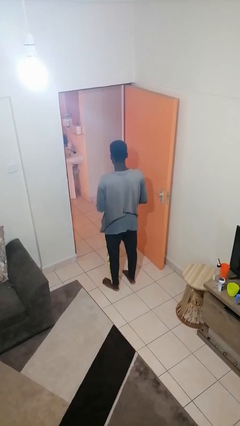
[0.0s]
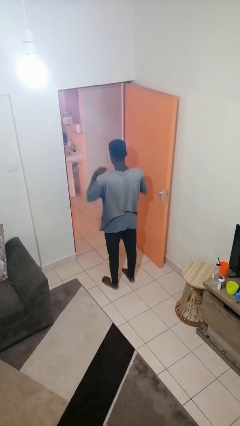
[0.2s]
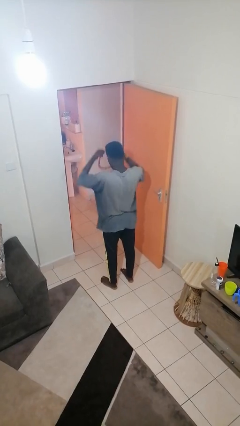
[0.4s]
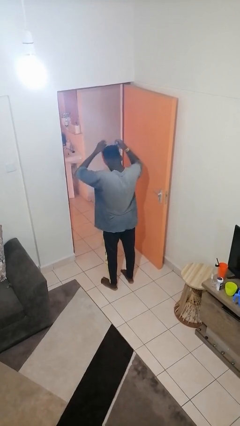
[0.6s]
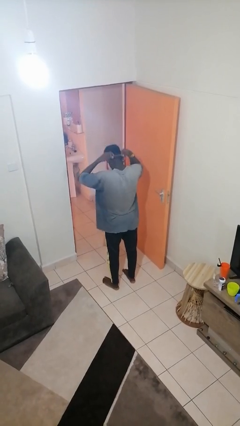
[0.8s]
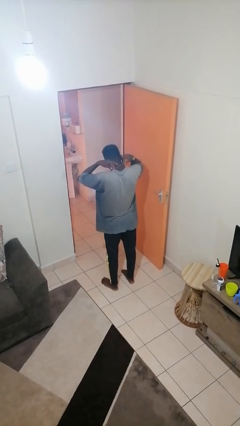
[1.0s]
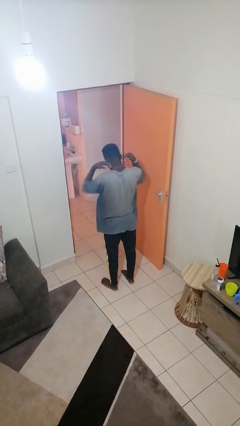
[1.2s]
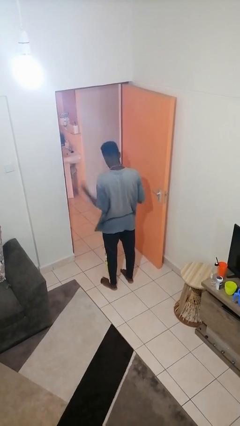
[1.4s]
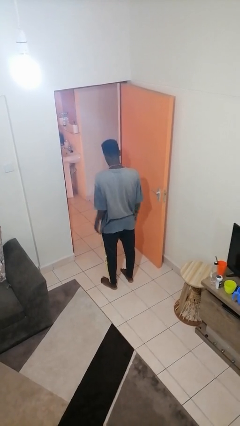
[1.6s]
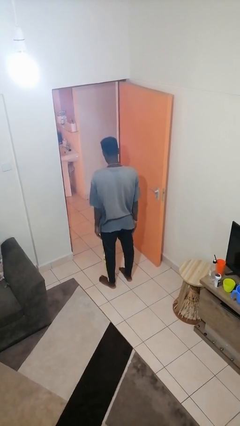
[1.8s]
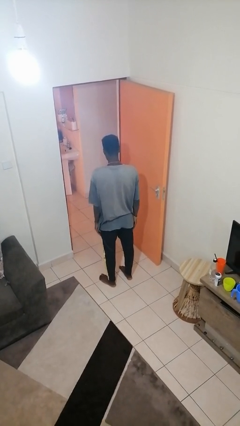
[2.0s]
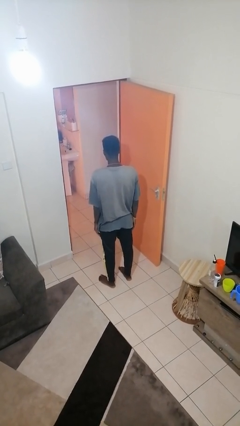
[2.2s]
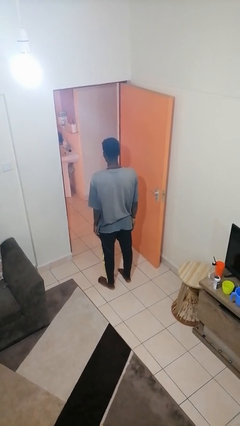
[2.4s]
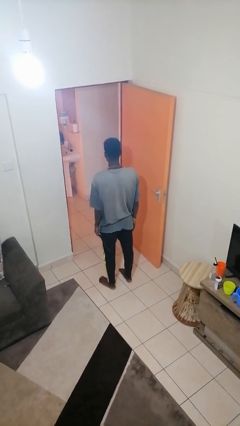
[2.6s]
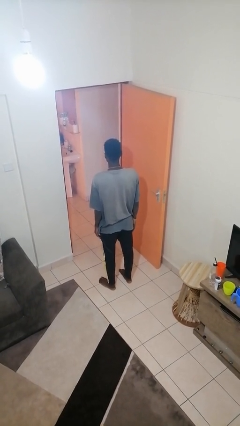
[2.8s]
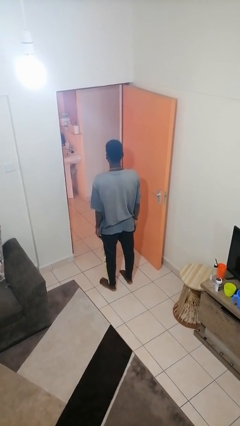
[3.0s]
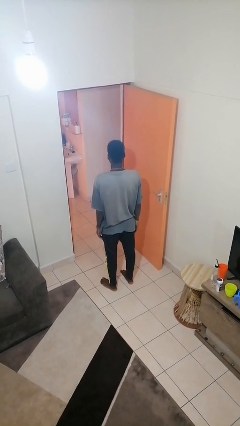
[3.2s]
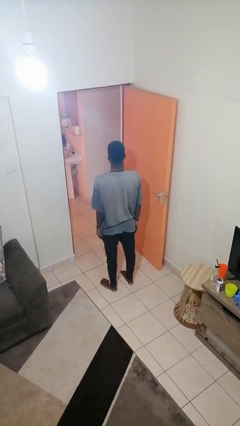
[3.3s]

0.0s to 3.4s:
person puts on necklace

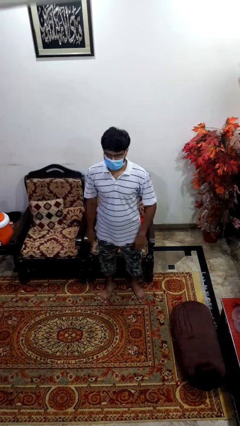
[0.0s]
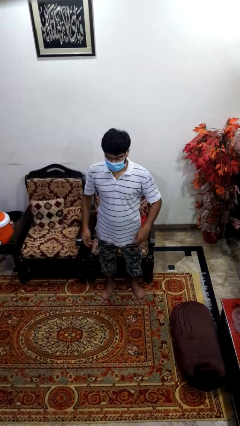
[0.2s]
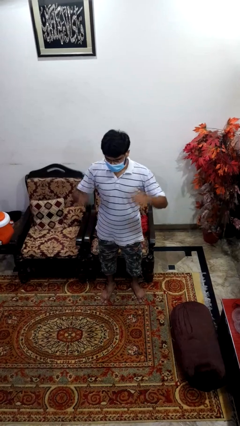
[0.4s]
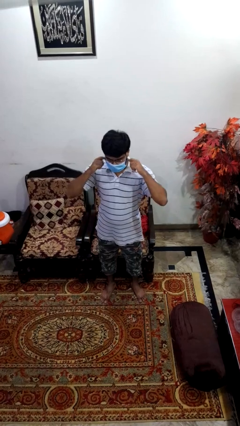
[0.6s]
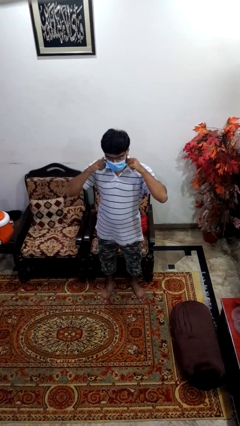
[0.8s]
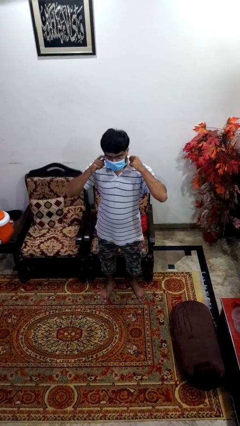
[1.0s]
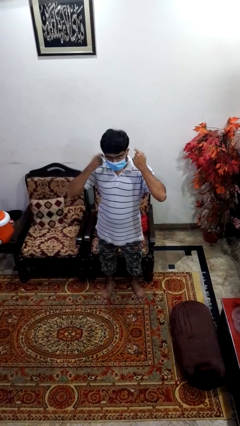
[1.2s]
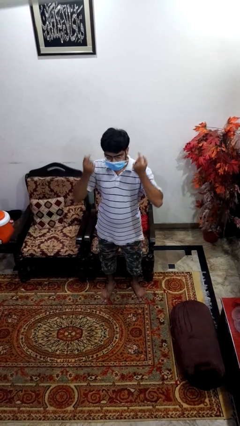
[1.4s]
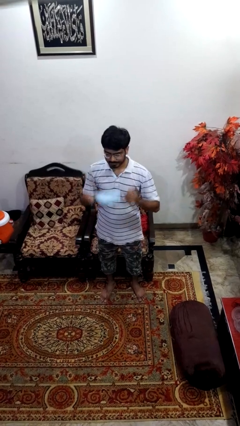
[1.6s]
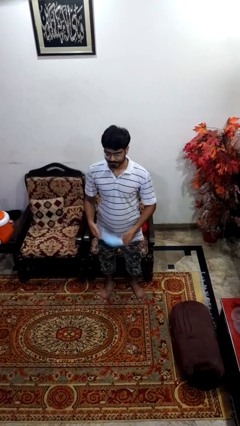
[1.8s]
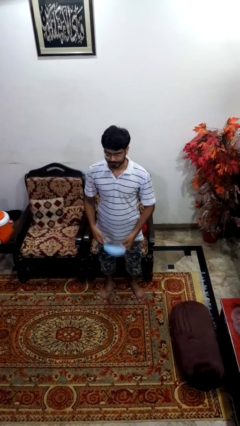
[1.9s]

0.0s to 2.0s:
person takes off facemask

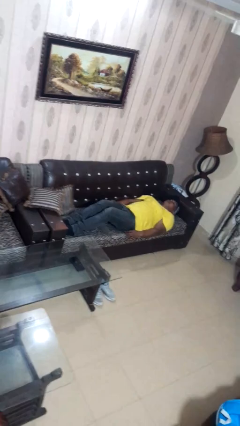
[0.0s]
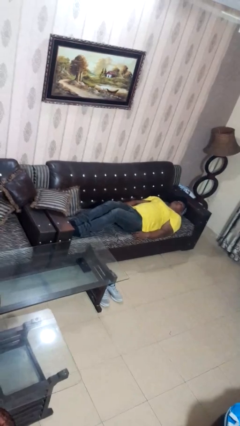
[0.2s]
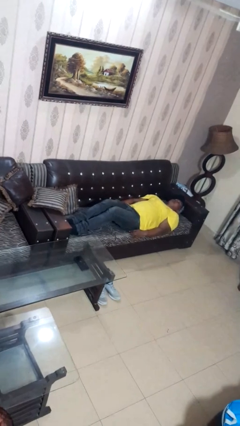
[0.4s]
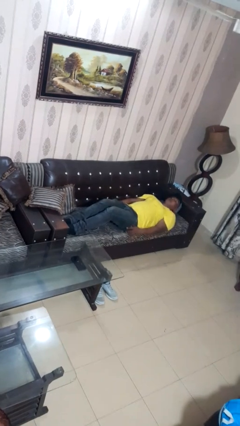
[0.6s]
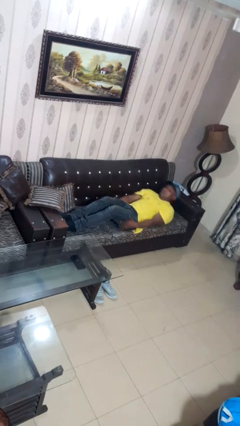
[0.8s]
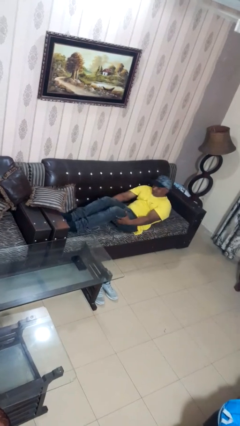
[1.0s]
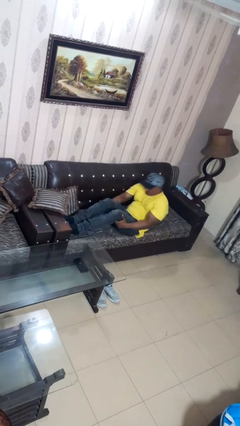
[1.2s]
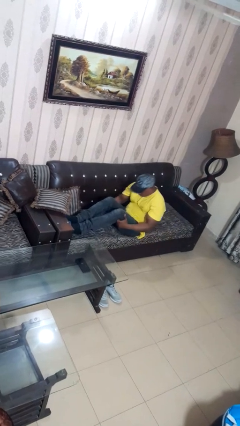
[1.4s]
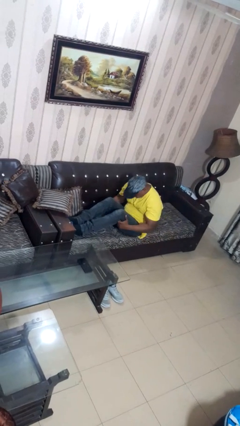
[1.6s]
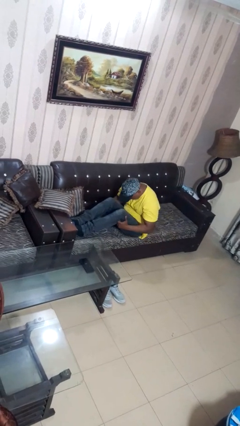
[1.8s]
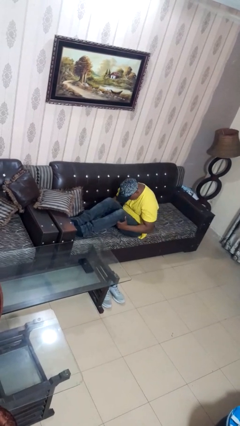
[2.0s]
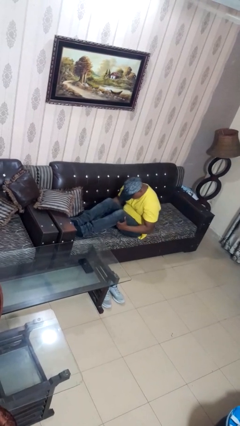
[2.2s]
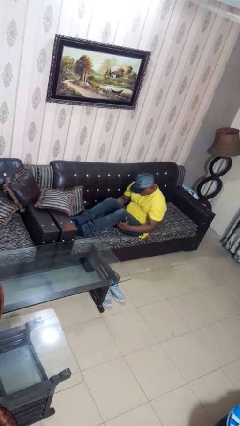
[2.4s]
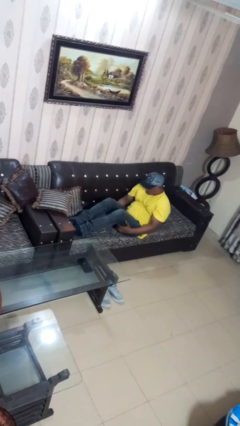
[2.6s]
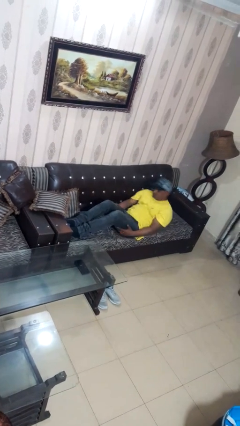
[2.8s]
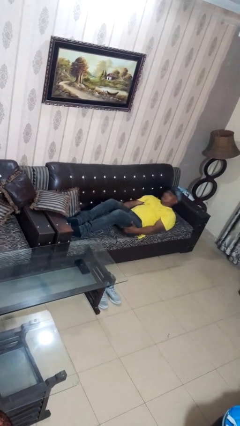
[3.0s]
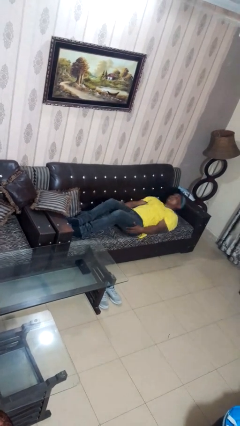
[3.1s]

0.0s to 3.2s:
person exercises with situp

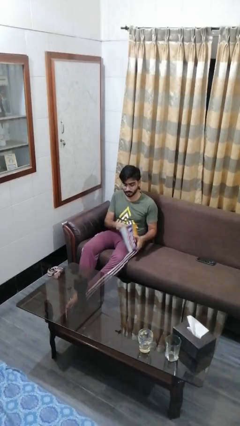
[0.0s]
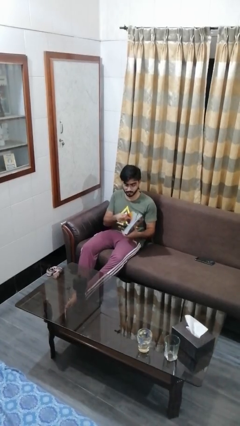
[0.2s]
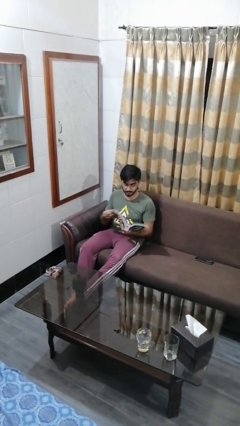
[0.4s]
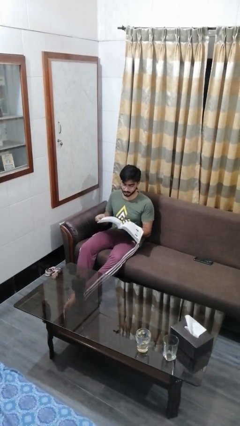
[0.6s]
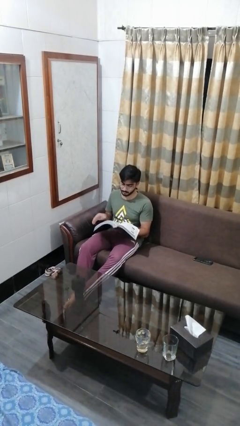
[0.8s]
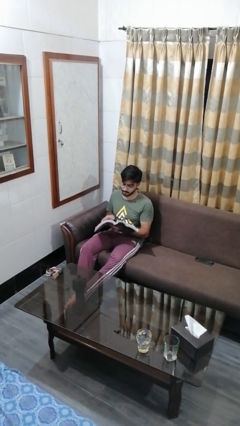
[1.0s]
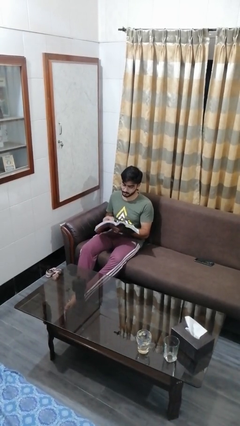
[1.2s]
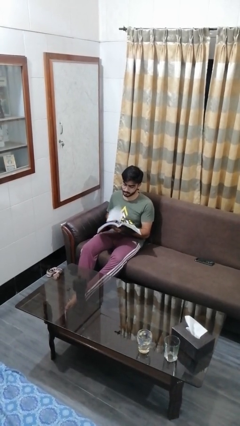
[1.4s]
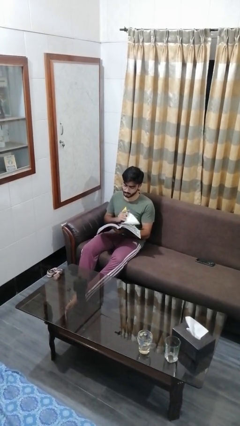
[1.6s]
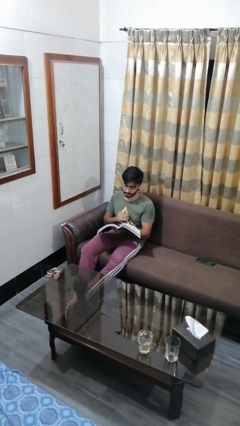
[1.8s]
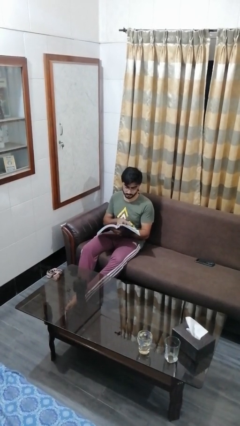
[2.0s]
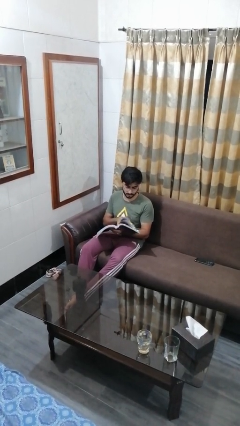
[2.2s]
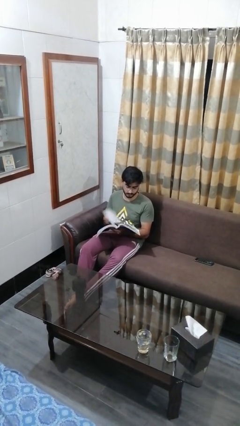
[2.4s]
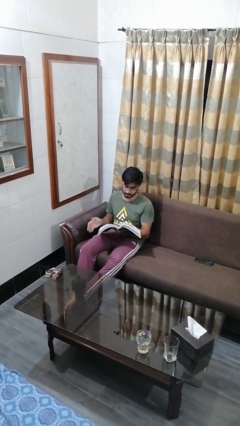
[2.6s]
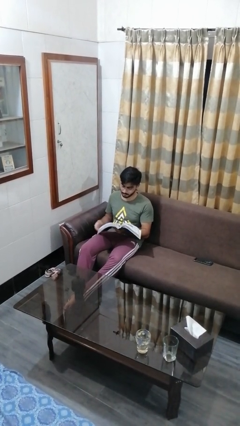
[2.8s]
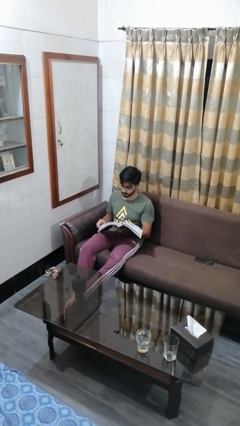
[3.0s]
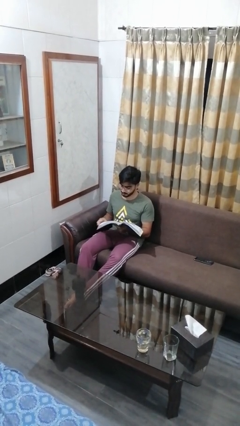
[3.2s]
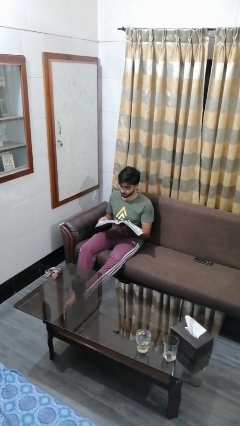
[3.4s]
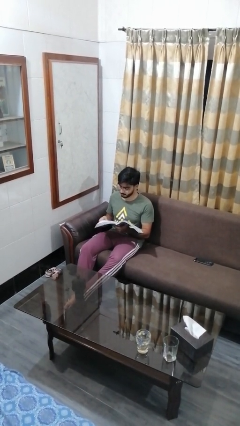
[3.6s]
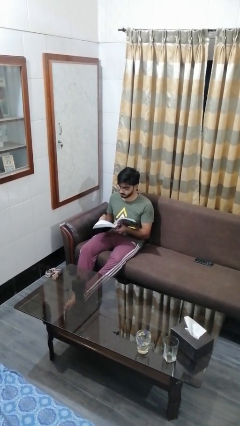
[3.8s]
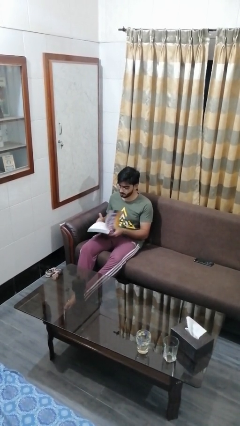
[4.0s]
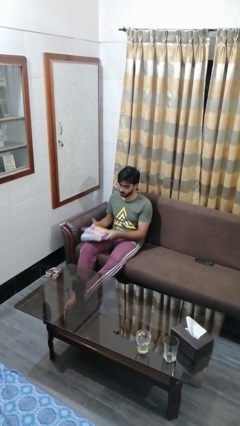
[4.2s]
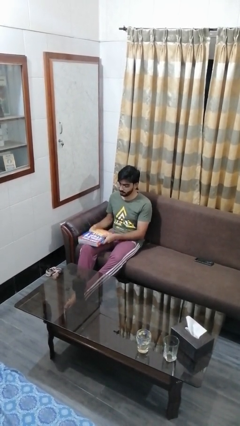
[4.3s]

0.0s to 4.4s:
person reads book

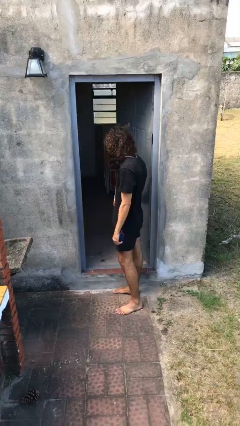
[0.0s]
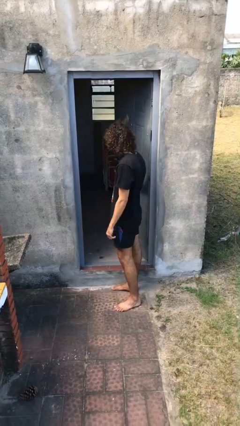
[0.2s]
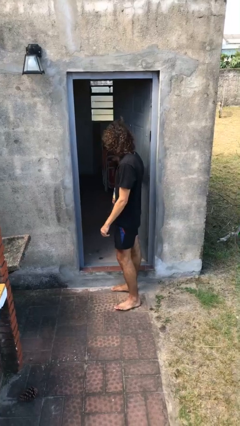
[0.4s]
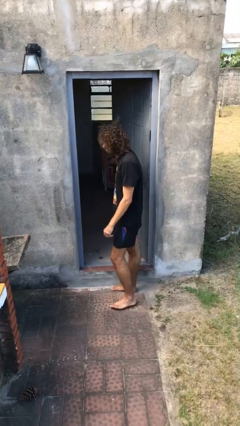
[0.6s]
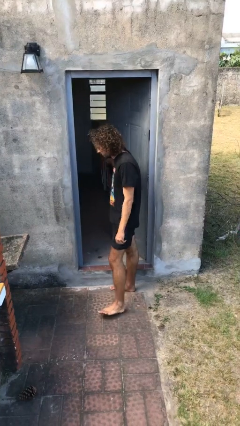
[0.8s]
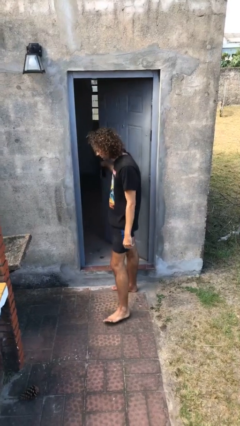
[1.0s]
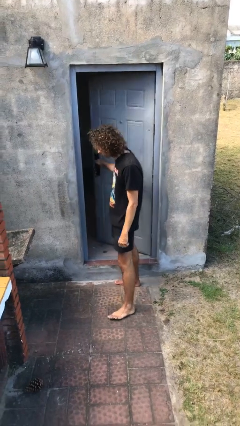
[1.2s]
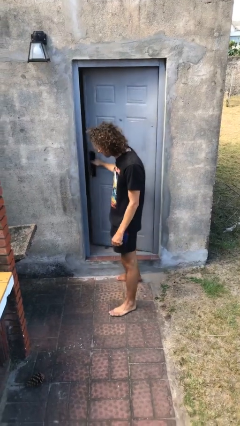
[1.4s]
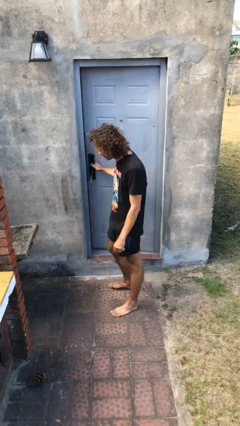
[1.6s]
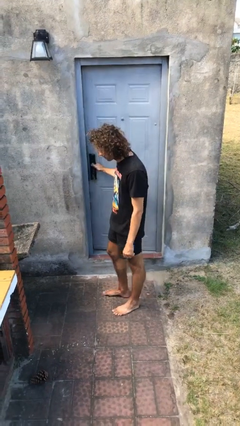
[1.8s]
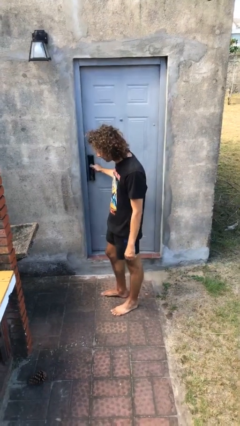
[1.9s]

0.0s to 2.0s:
person closes facility door

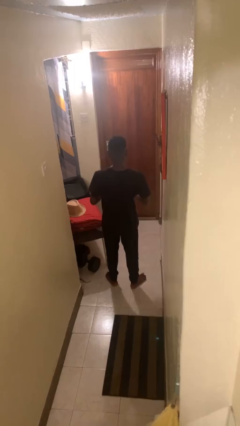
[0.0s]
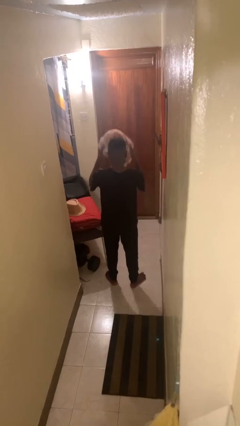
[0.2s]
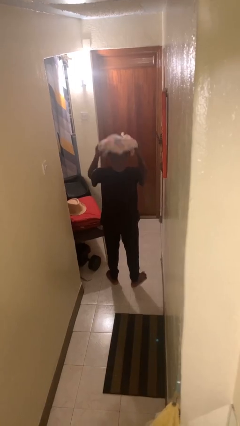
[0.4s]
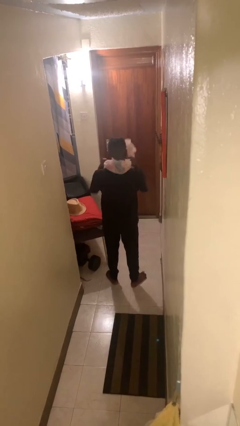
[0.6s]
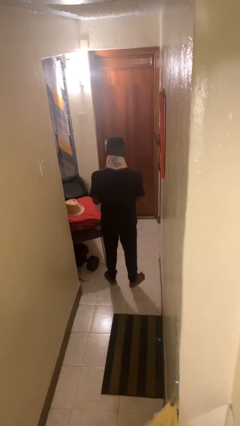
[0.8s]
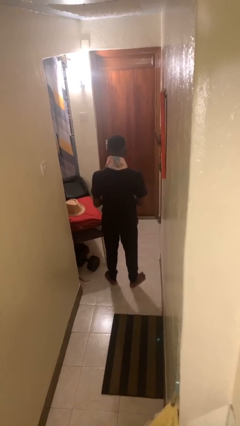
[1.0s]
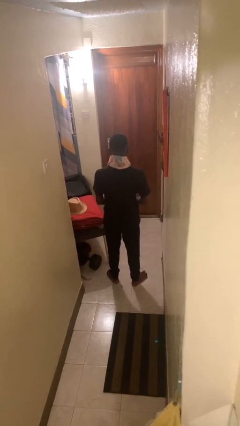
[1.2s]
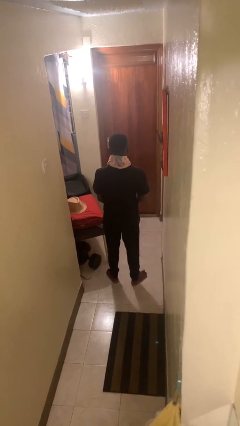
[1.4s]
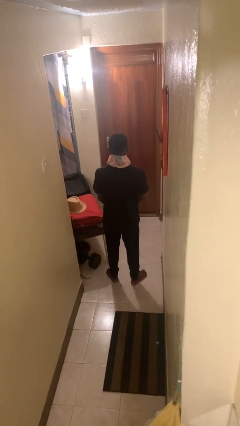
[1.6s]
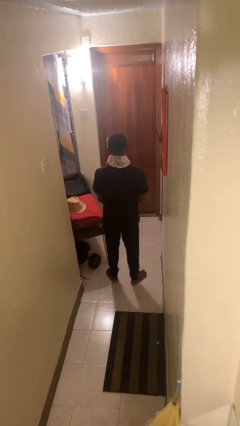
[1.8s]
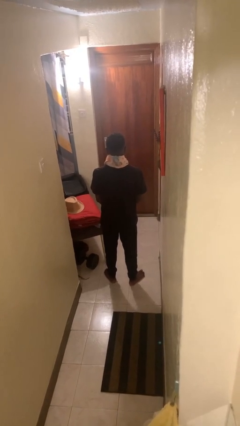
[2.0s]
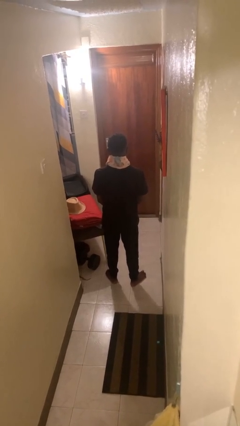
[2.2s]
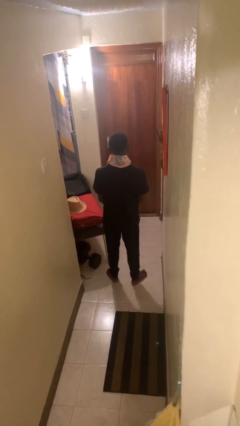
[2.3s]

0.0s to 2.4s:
person puts on scarf
